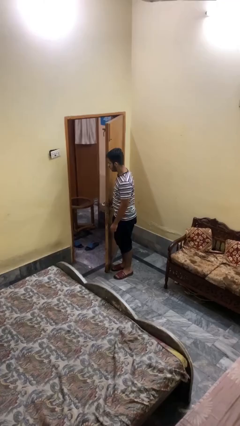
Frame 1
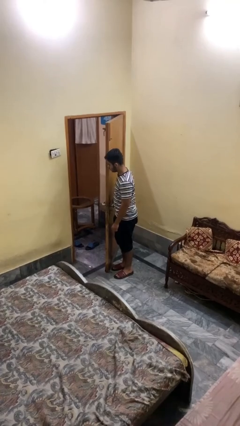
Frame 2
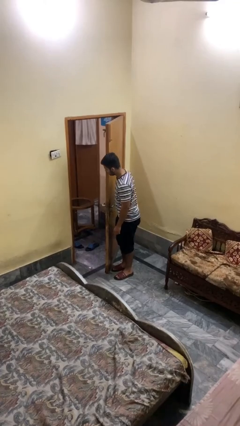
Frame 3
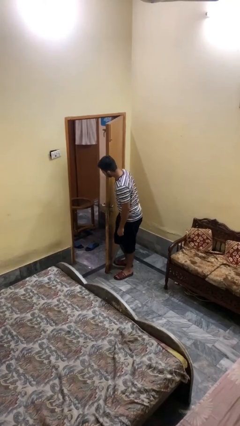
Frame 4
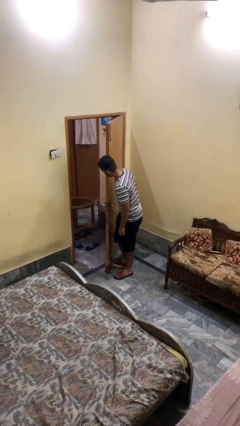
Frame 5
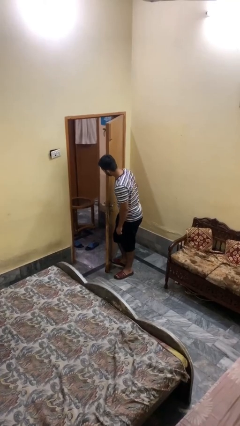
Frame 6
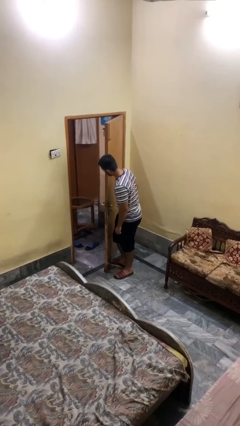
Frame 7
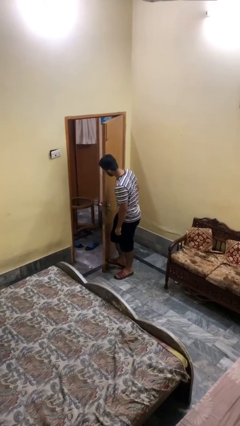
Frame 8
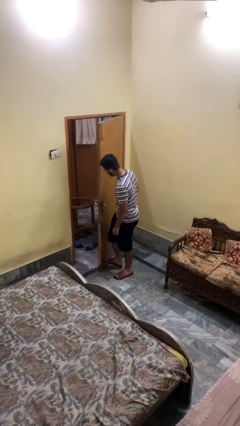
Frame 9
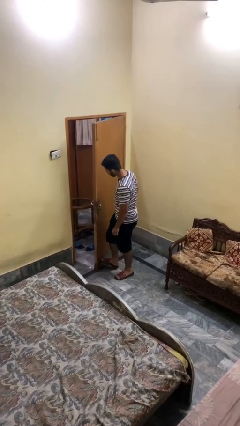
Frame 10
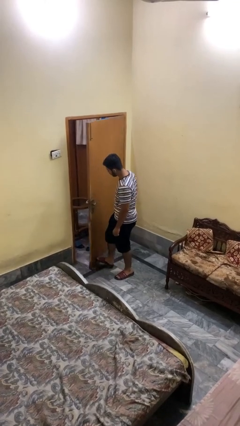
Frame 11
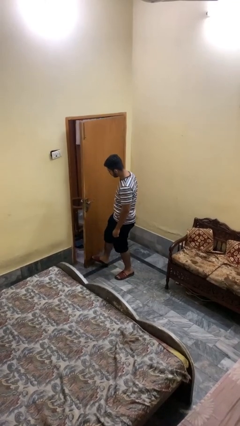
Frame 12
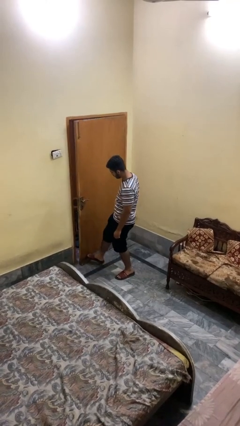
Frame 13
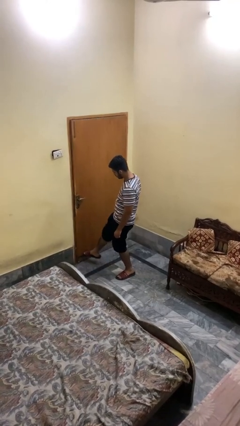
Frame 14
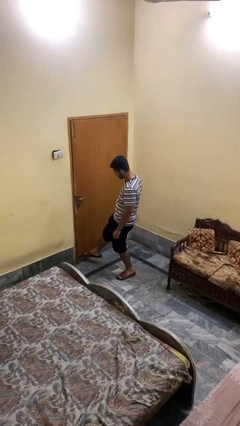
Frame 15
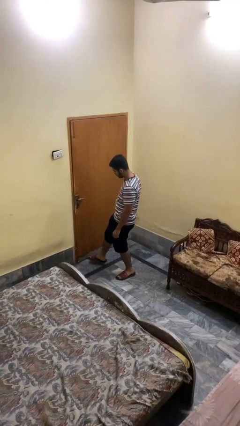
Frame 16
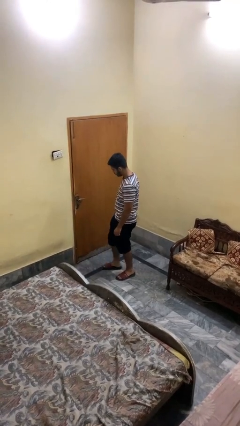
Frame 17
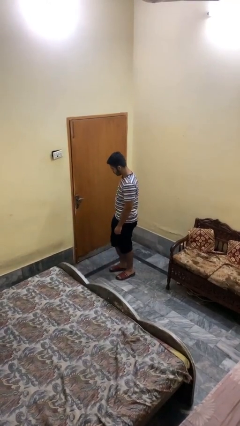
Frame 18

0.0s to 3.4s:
person closes door with foot

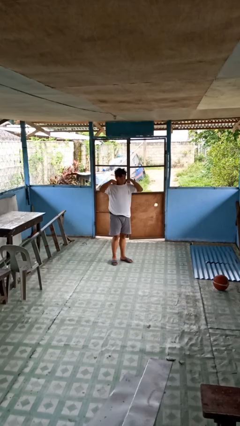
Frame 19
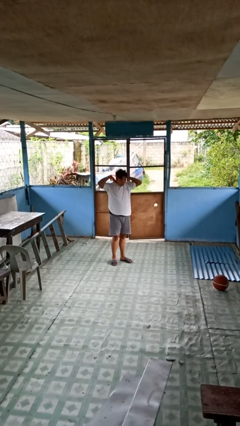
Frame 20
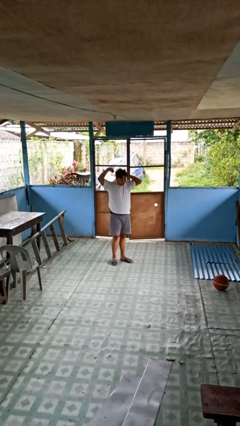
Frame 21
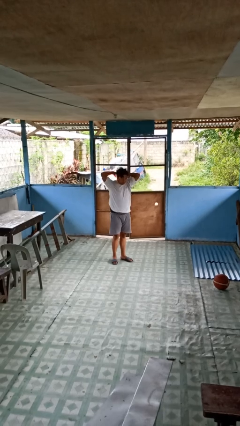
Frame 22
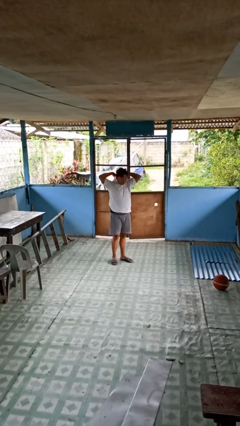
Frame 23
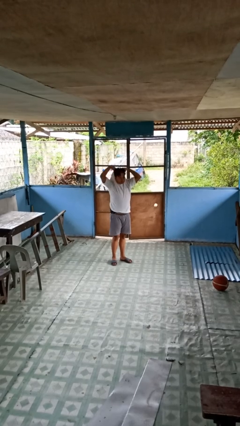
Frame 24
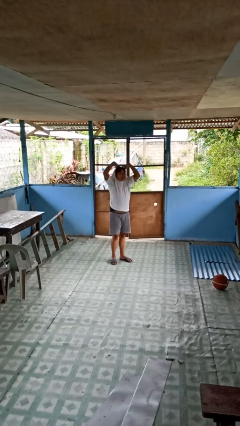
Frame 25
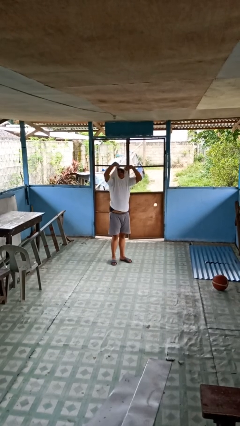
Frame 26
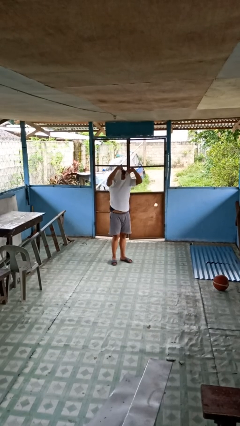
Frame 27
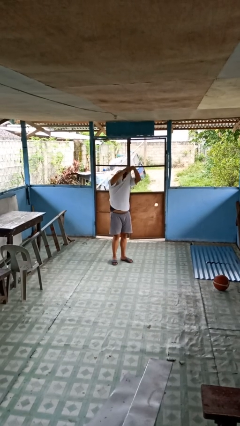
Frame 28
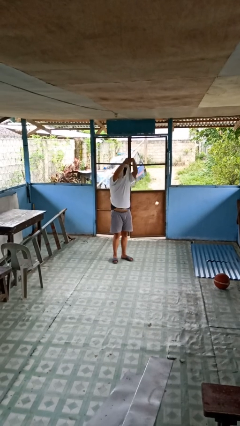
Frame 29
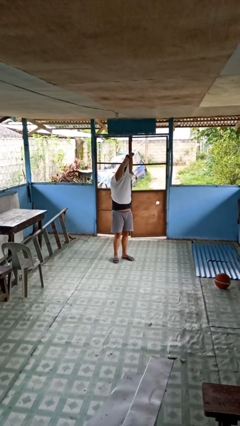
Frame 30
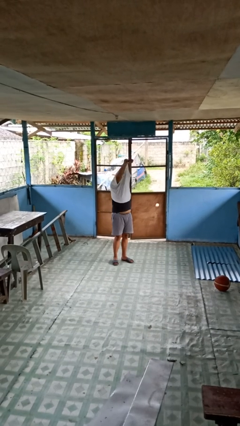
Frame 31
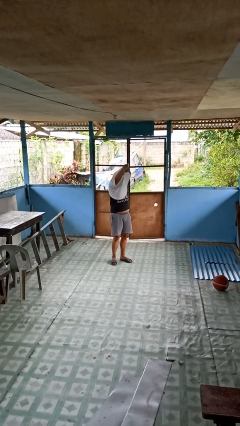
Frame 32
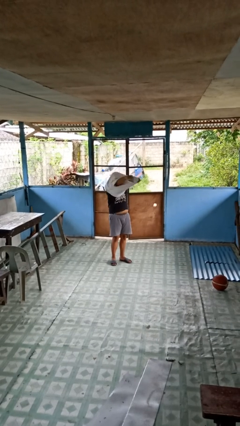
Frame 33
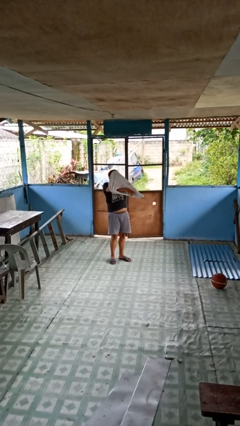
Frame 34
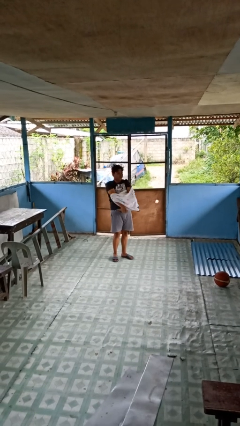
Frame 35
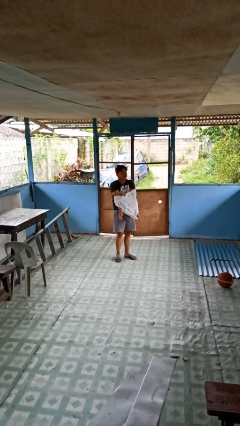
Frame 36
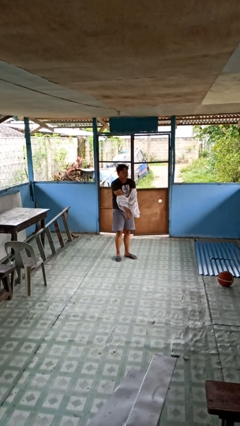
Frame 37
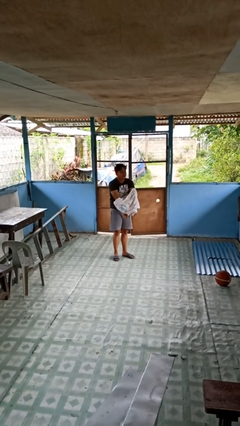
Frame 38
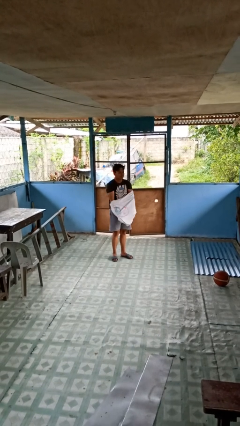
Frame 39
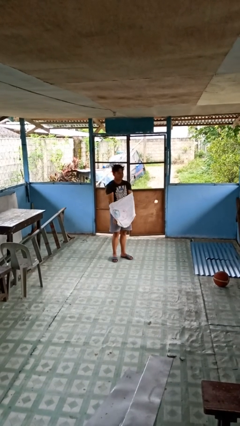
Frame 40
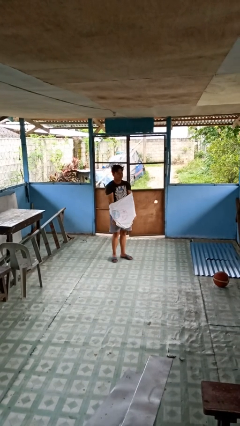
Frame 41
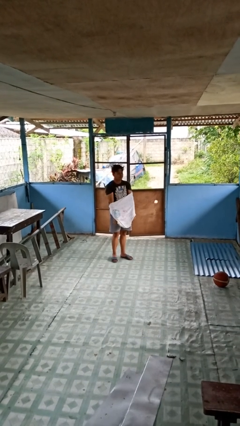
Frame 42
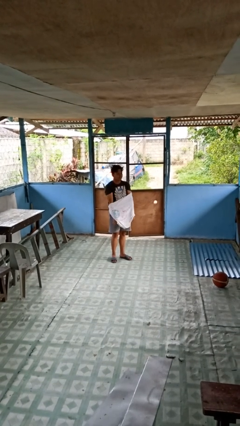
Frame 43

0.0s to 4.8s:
person takes off shirt

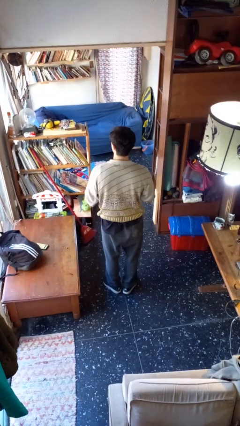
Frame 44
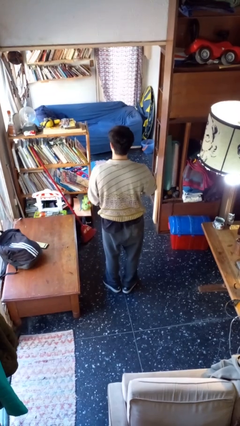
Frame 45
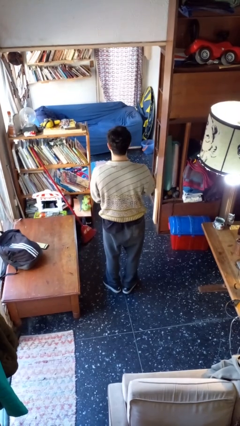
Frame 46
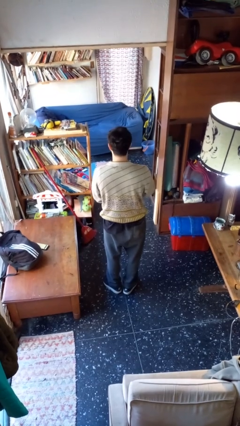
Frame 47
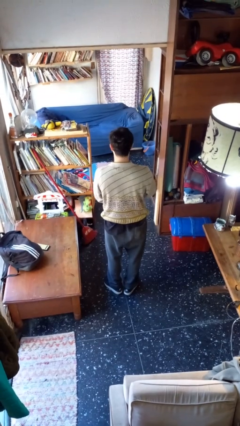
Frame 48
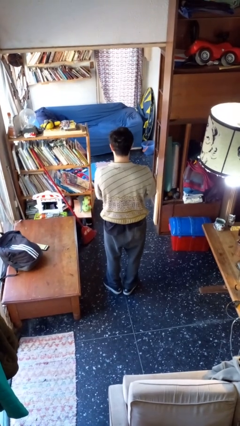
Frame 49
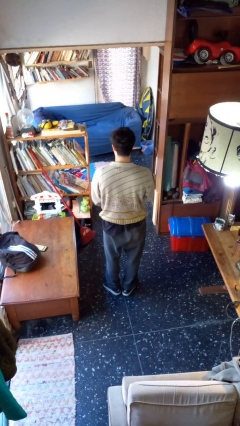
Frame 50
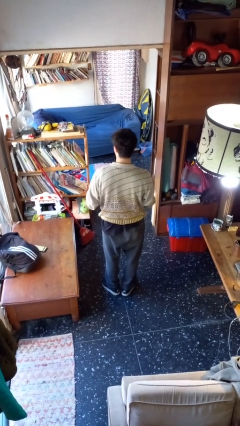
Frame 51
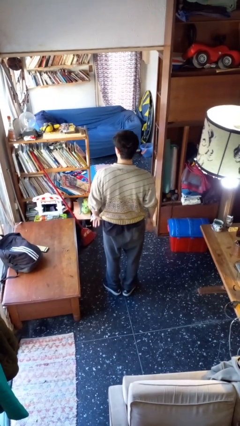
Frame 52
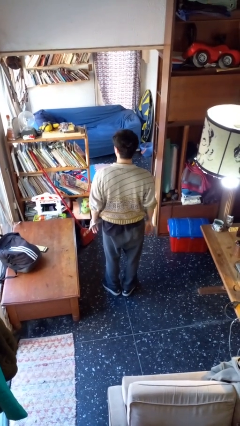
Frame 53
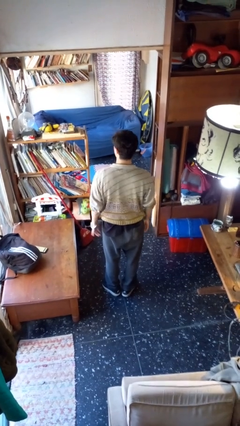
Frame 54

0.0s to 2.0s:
person puts on wristwatch

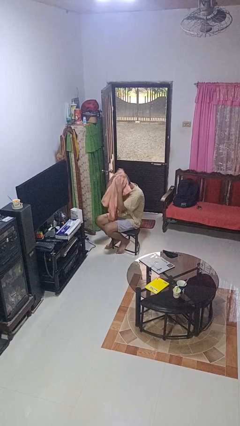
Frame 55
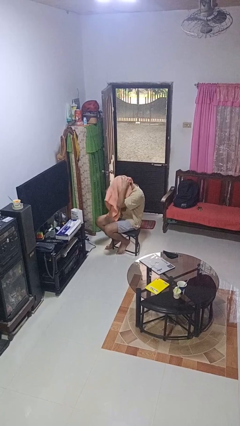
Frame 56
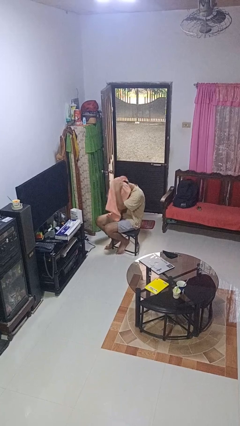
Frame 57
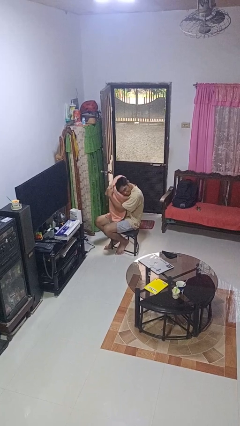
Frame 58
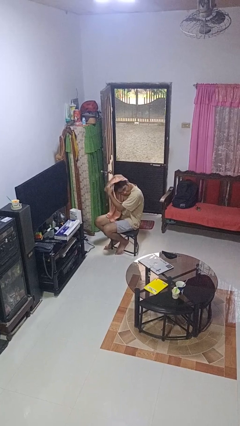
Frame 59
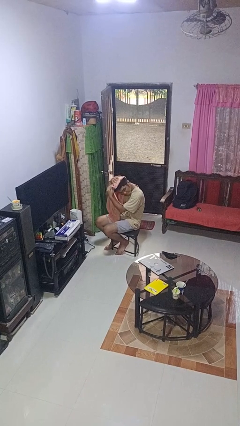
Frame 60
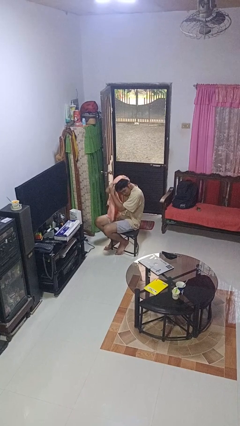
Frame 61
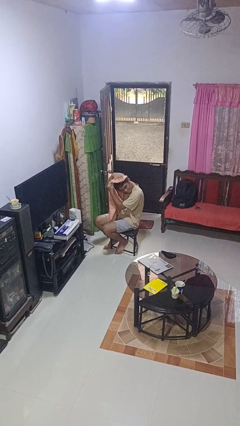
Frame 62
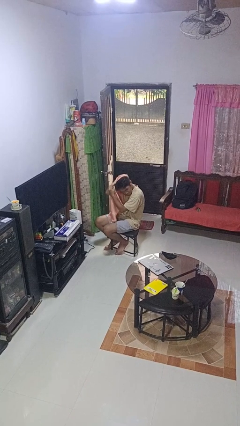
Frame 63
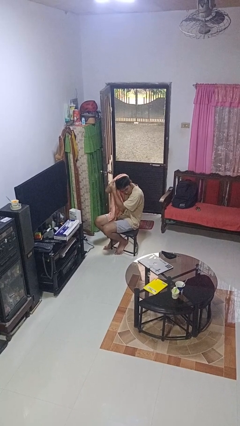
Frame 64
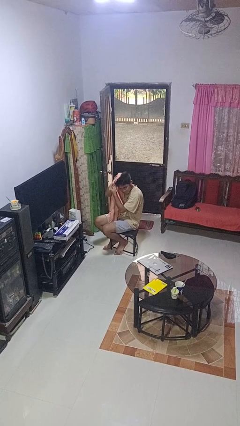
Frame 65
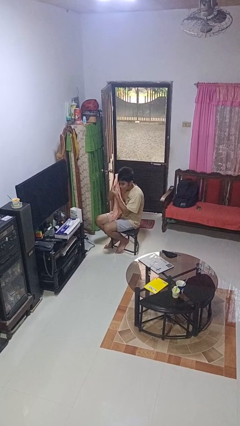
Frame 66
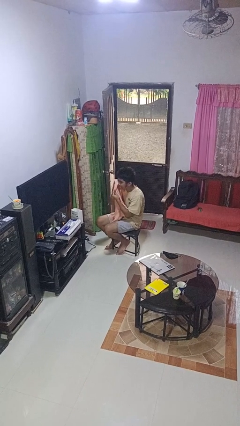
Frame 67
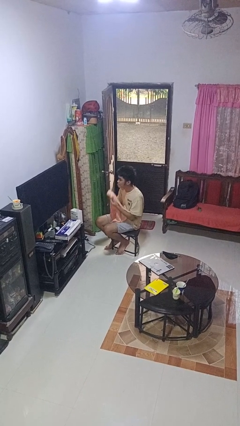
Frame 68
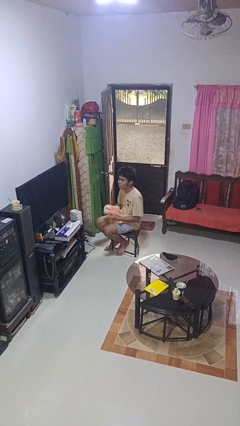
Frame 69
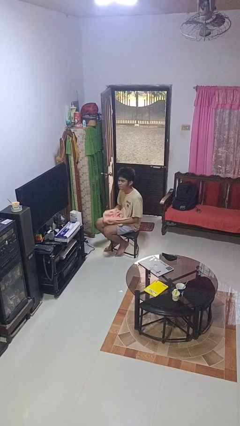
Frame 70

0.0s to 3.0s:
person dries hair with towel

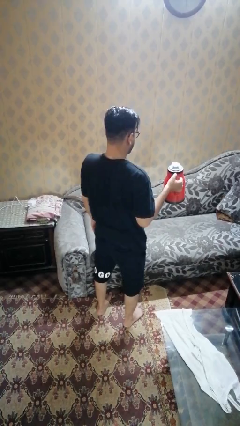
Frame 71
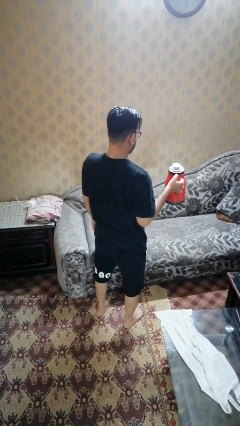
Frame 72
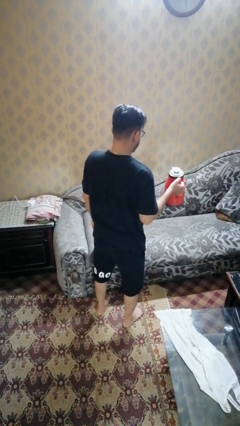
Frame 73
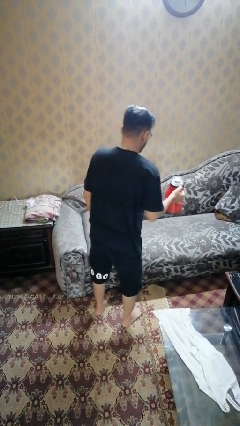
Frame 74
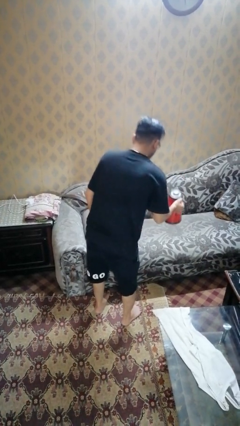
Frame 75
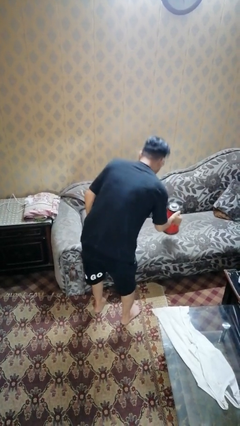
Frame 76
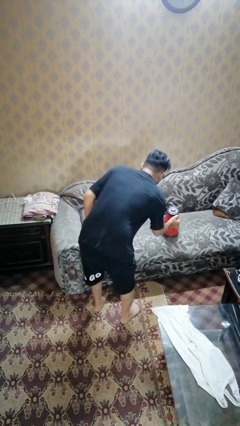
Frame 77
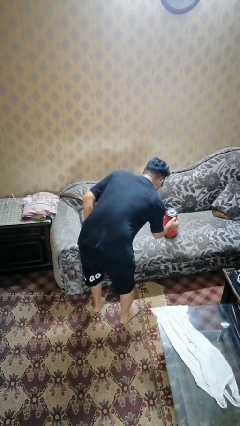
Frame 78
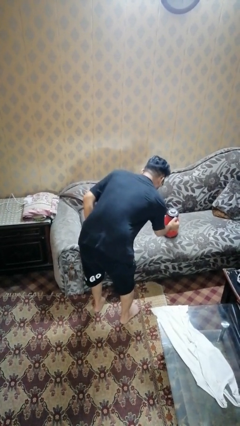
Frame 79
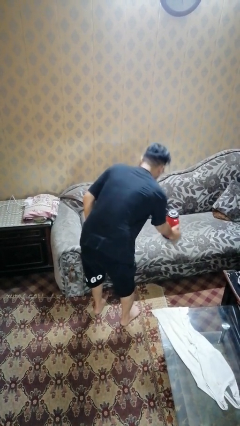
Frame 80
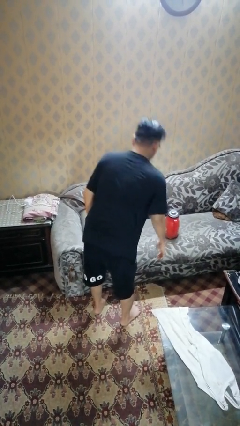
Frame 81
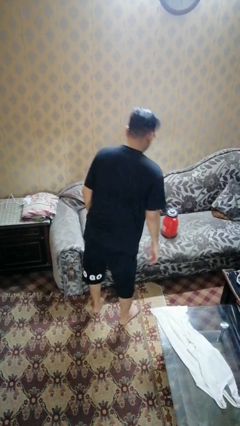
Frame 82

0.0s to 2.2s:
person puts down object on couch

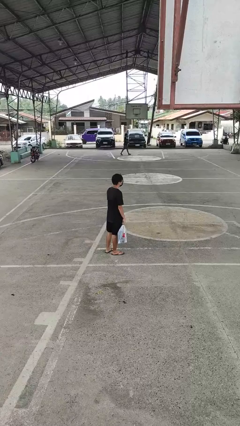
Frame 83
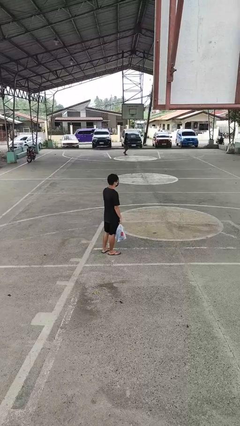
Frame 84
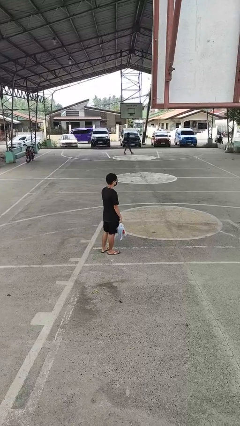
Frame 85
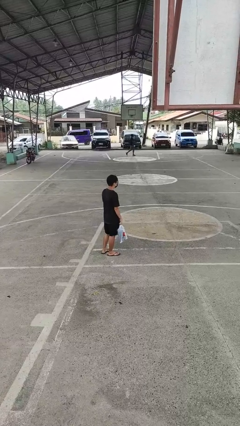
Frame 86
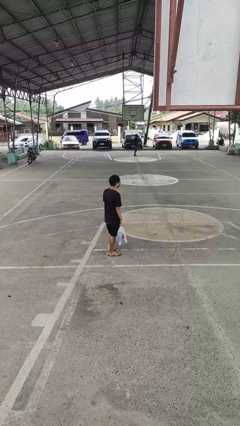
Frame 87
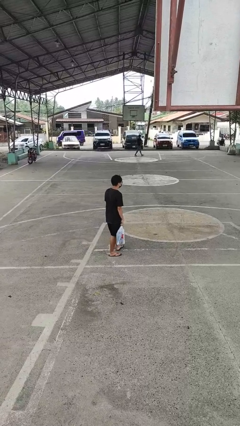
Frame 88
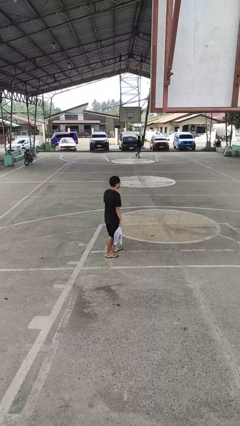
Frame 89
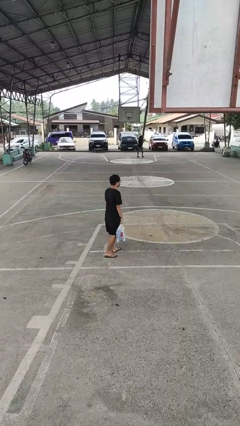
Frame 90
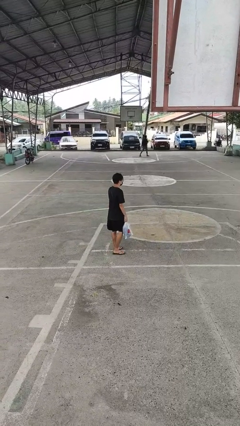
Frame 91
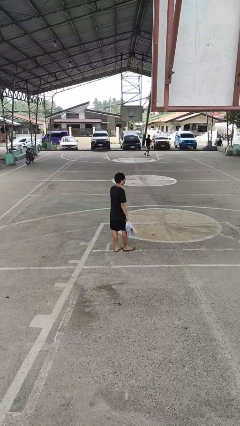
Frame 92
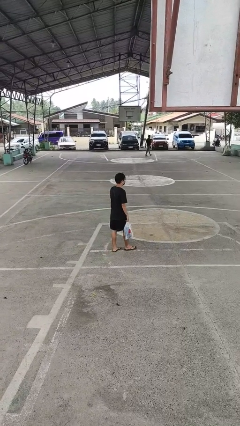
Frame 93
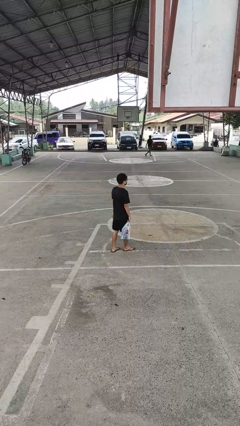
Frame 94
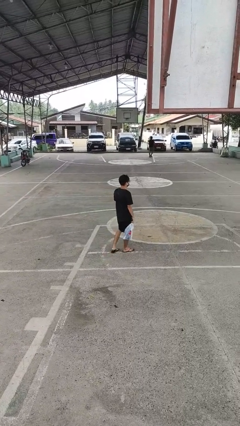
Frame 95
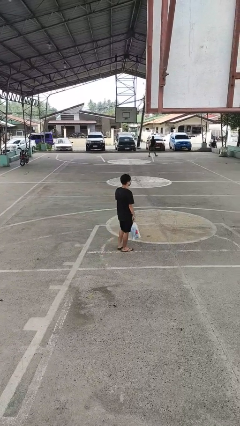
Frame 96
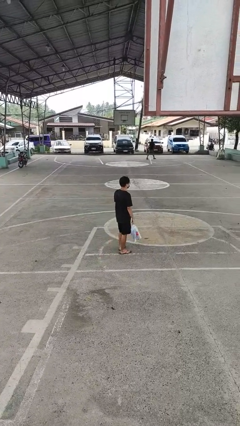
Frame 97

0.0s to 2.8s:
person carries groceries
